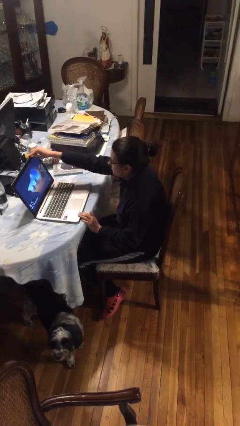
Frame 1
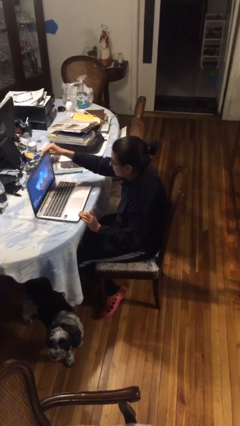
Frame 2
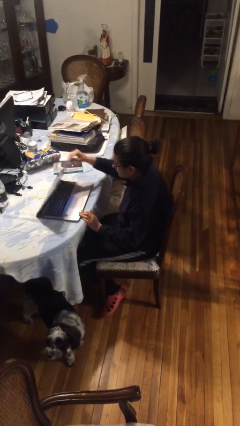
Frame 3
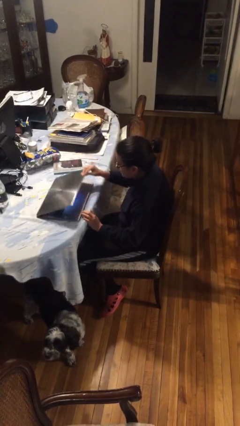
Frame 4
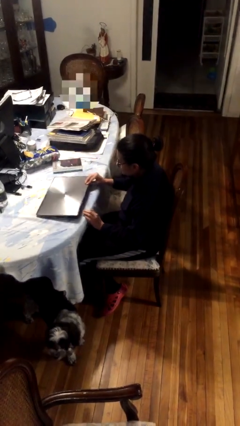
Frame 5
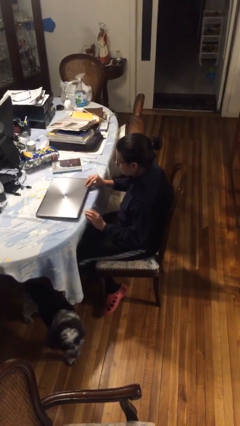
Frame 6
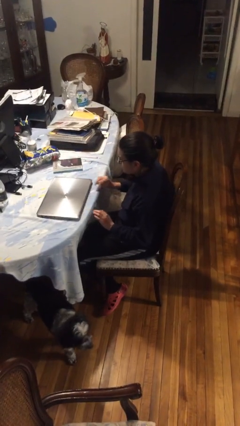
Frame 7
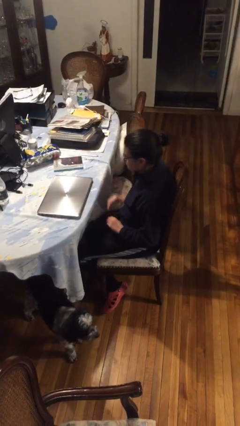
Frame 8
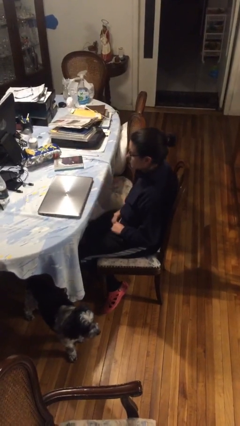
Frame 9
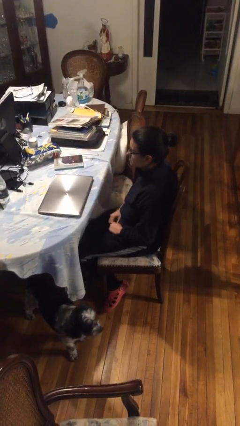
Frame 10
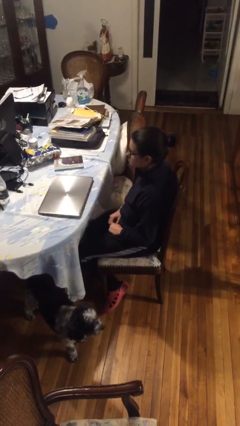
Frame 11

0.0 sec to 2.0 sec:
person closes laptop

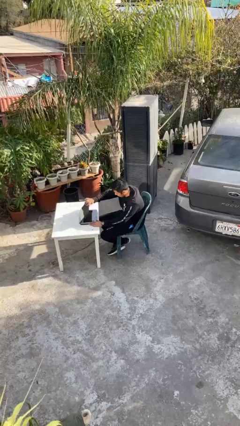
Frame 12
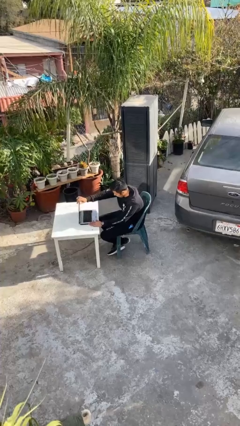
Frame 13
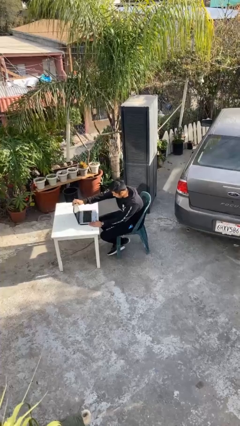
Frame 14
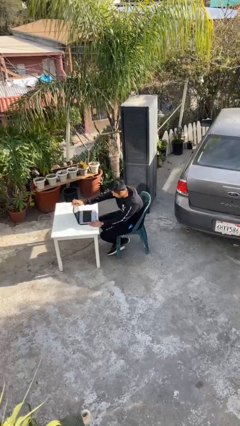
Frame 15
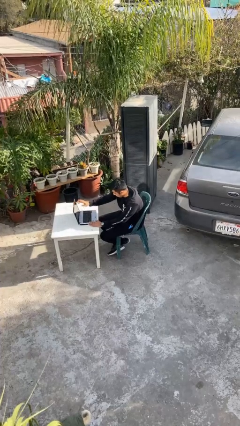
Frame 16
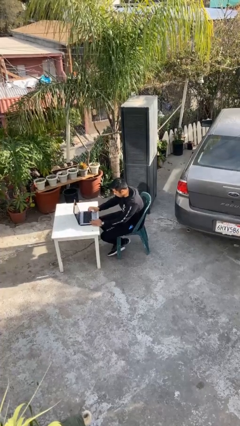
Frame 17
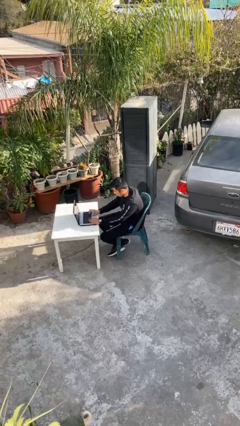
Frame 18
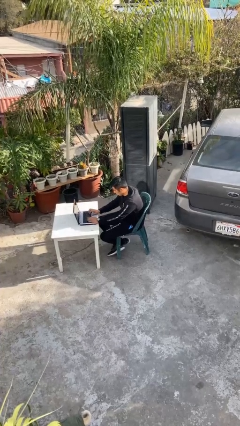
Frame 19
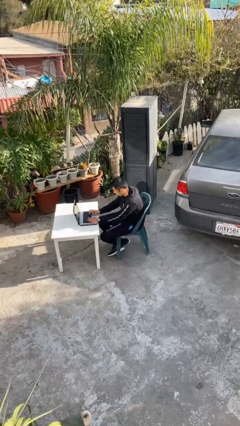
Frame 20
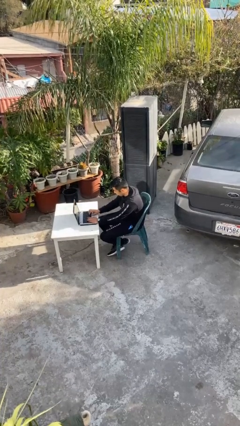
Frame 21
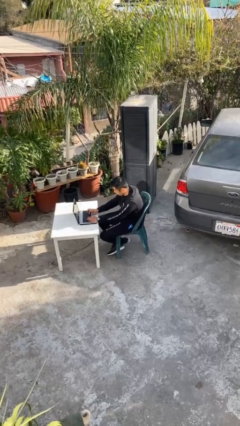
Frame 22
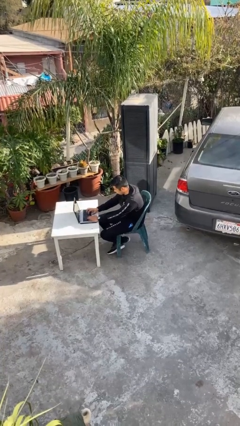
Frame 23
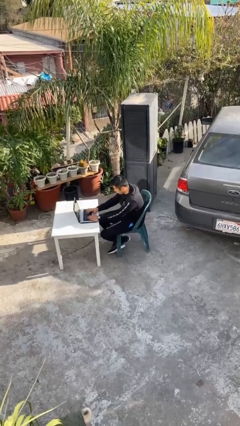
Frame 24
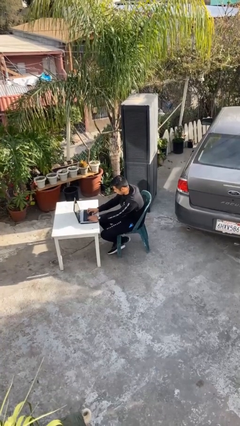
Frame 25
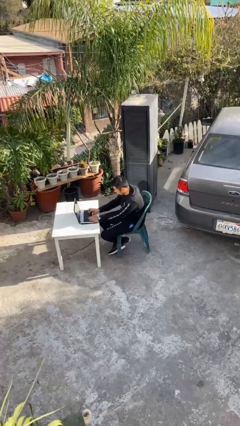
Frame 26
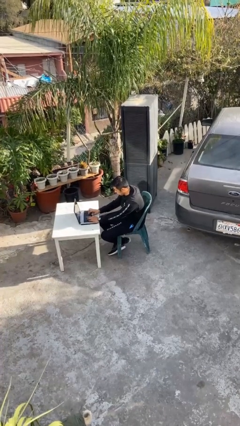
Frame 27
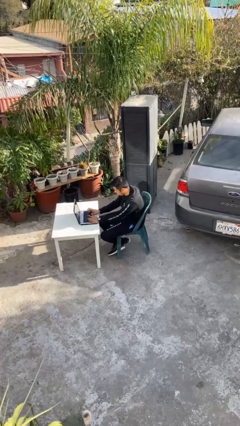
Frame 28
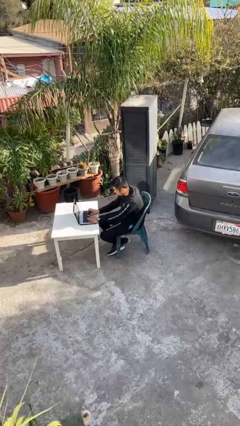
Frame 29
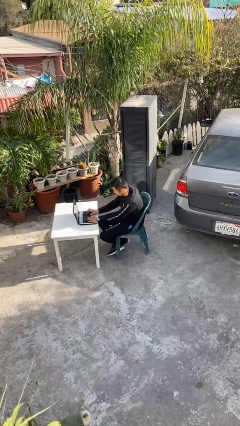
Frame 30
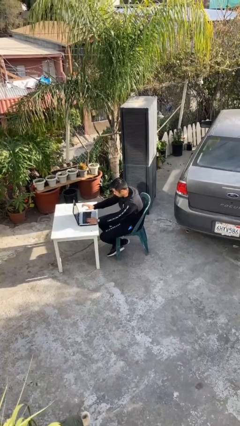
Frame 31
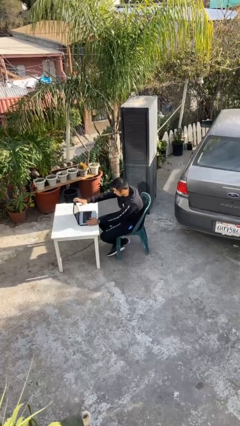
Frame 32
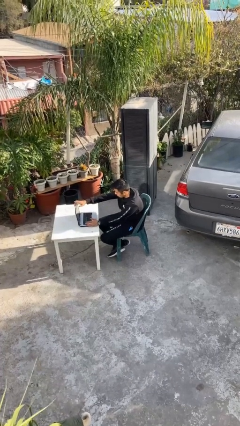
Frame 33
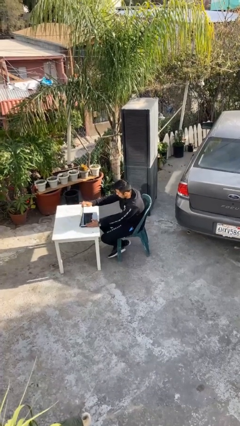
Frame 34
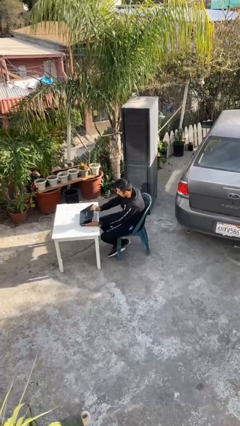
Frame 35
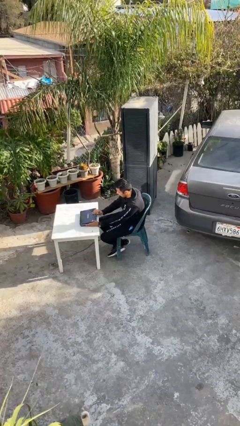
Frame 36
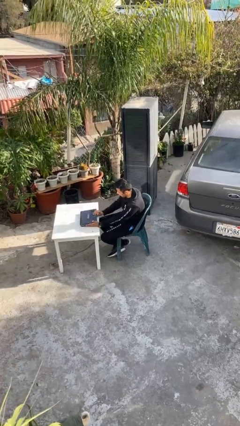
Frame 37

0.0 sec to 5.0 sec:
person interacts with laptop

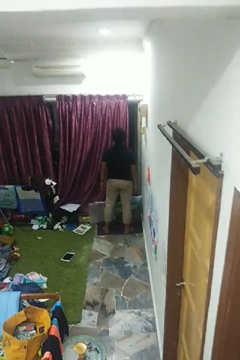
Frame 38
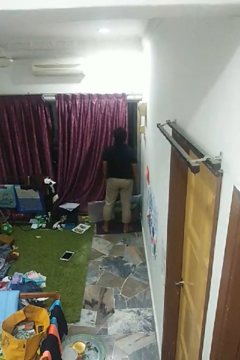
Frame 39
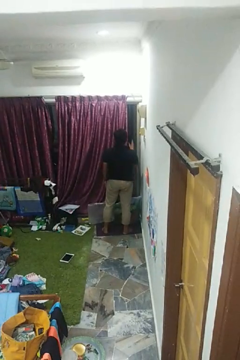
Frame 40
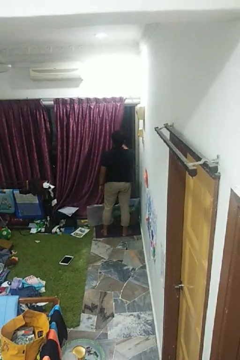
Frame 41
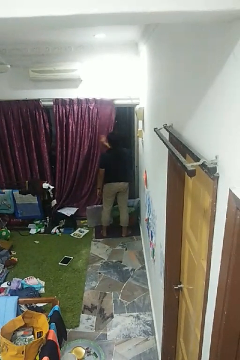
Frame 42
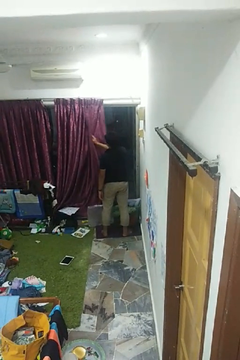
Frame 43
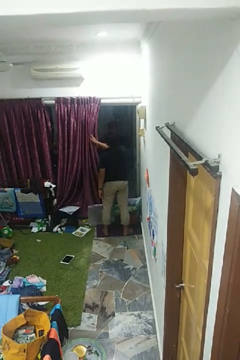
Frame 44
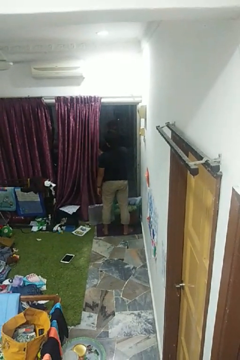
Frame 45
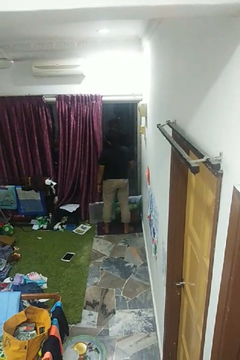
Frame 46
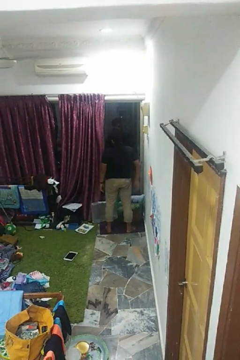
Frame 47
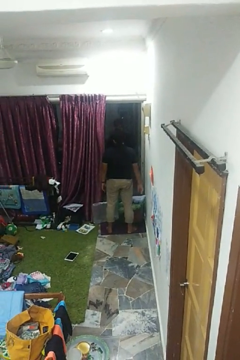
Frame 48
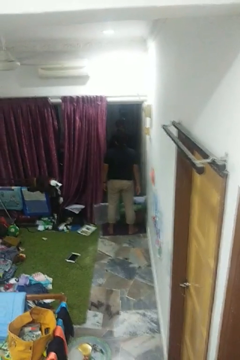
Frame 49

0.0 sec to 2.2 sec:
person opens curtains

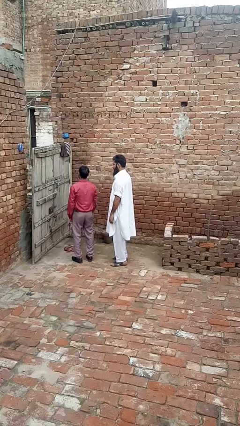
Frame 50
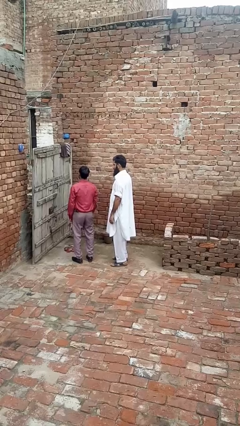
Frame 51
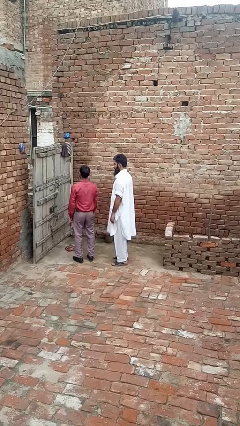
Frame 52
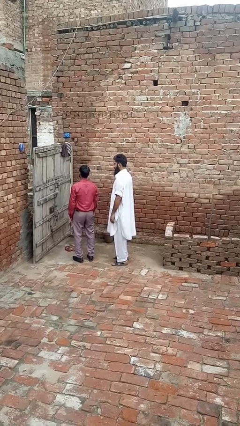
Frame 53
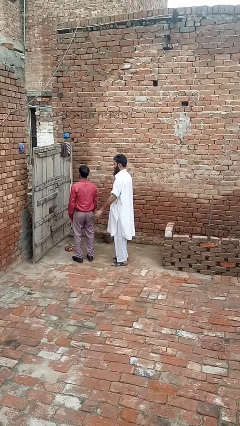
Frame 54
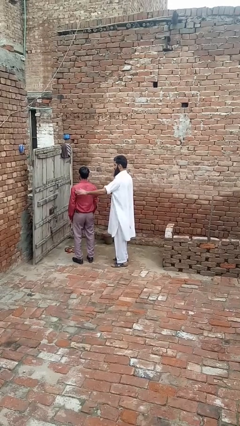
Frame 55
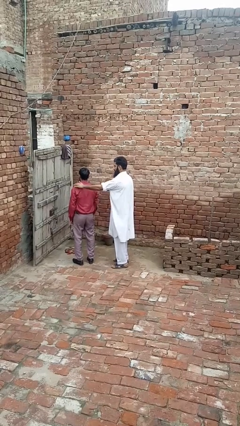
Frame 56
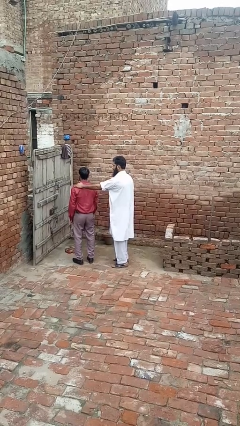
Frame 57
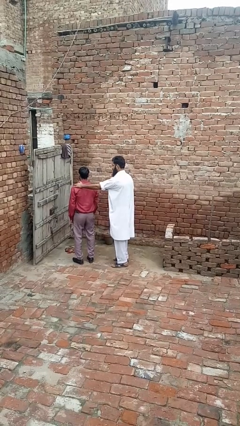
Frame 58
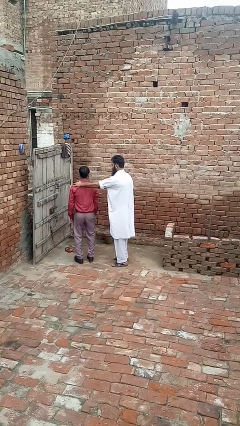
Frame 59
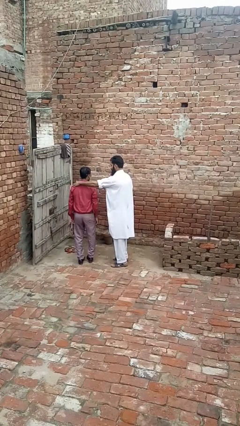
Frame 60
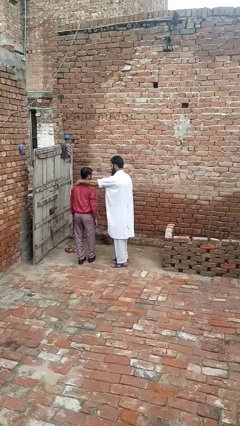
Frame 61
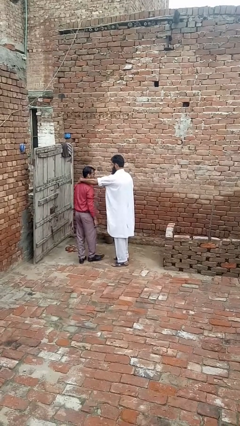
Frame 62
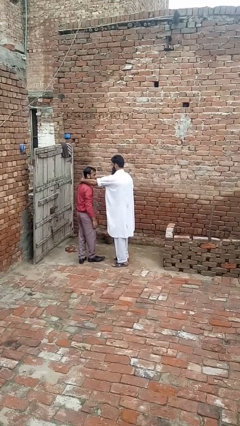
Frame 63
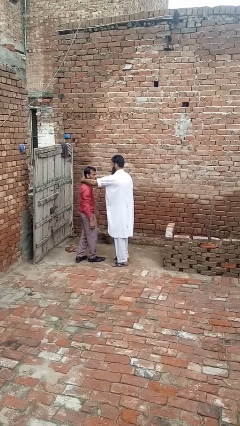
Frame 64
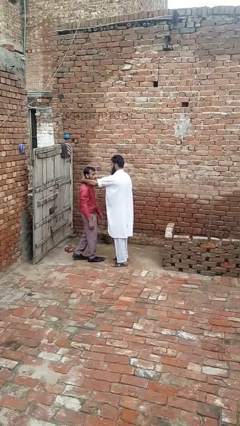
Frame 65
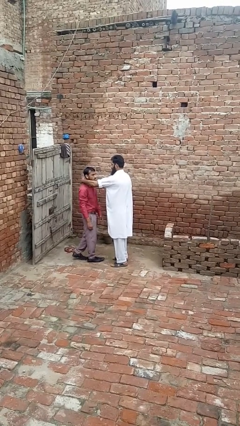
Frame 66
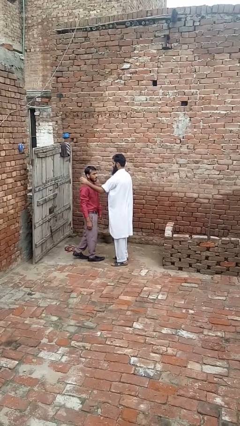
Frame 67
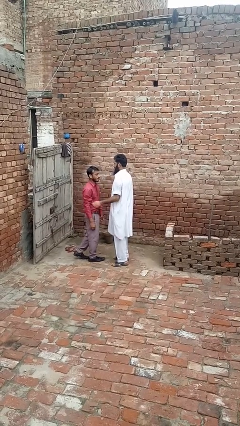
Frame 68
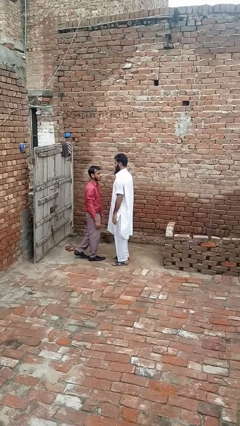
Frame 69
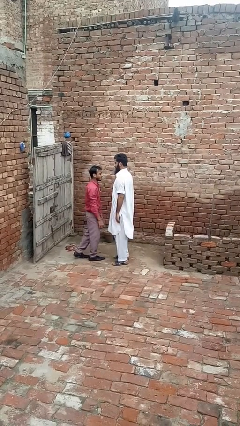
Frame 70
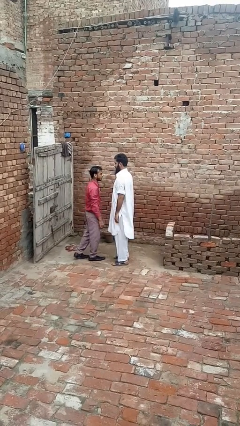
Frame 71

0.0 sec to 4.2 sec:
person touches back of person

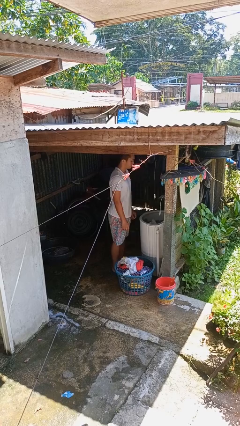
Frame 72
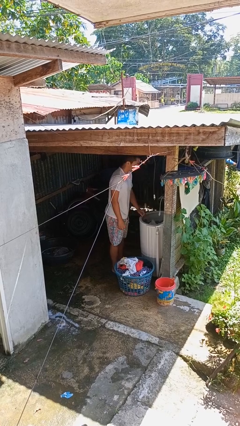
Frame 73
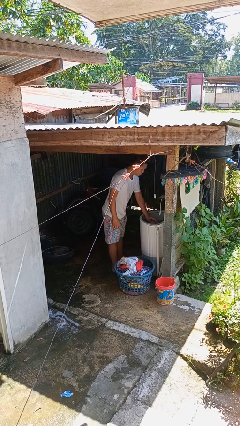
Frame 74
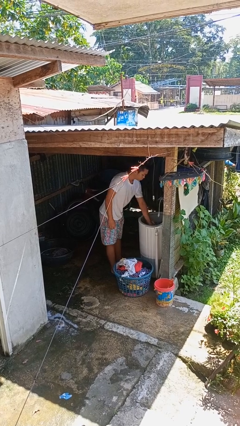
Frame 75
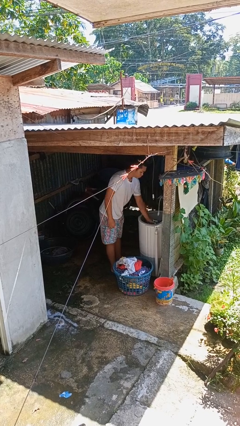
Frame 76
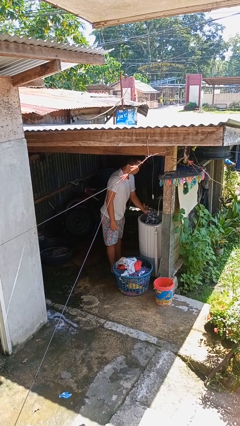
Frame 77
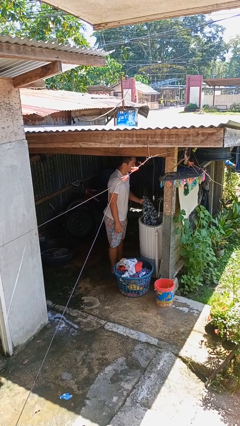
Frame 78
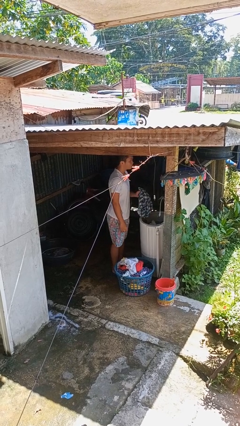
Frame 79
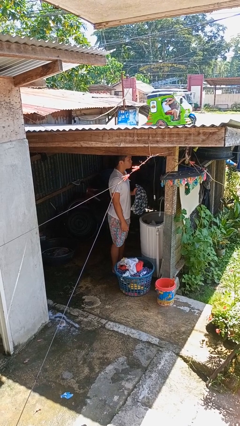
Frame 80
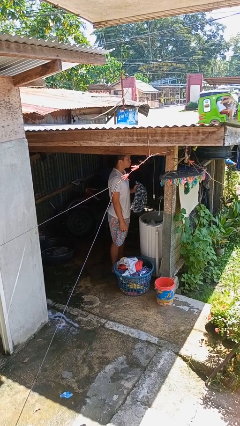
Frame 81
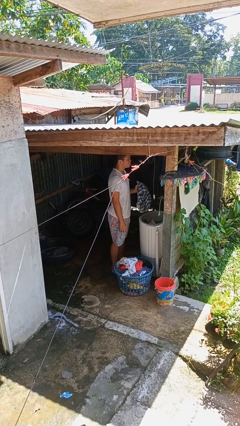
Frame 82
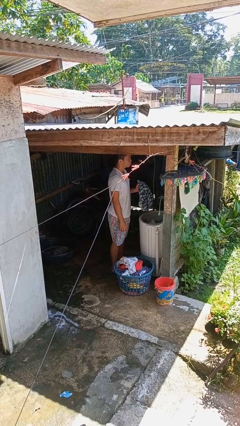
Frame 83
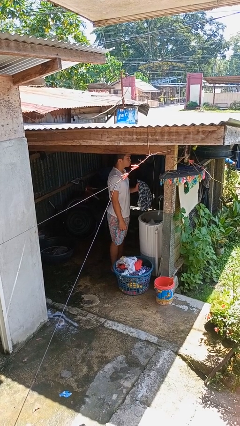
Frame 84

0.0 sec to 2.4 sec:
person unloads clotheswasher

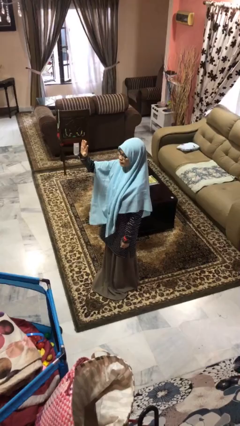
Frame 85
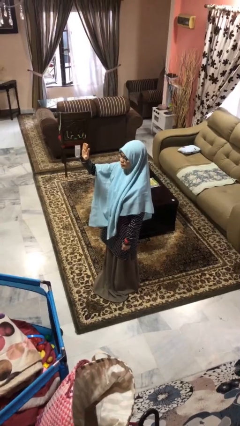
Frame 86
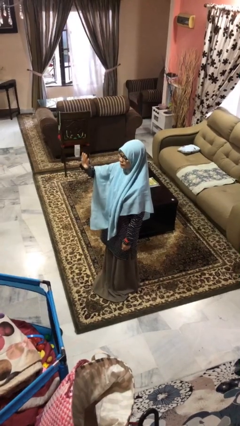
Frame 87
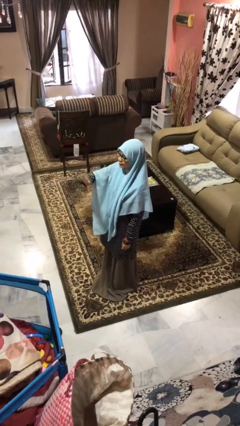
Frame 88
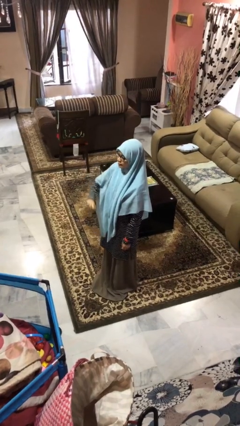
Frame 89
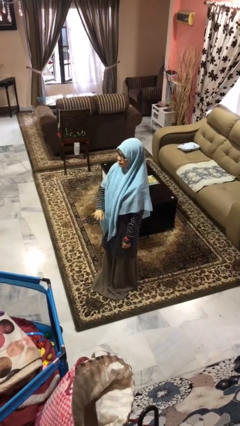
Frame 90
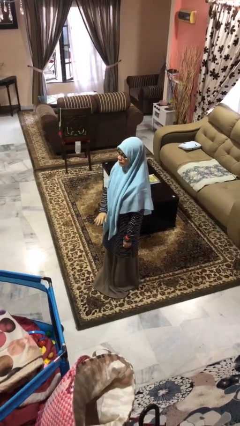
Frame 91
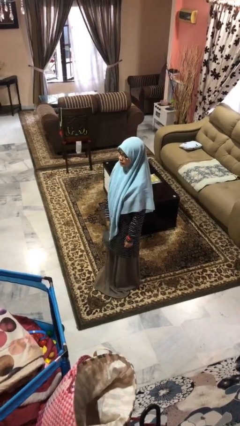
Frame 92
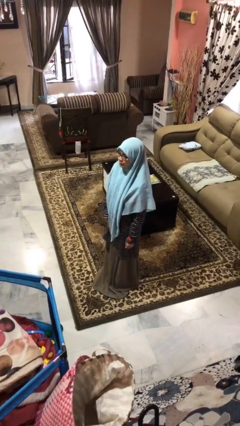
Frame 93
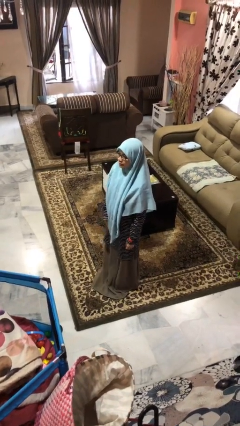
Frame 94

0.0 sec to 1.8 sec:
person gestures swipe down

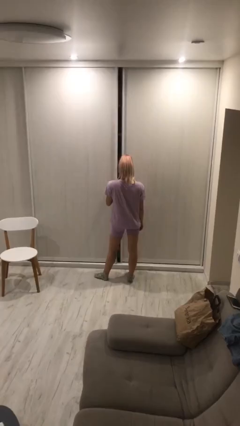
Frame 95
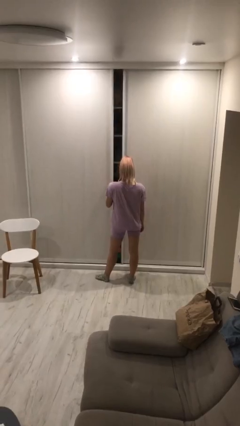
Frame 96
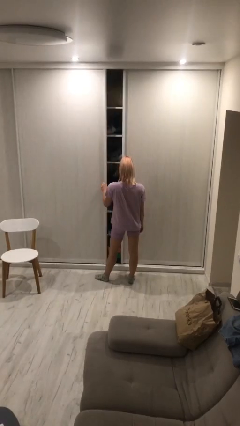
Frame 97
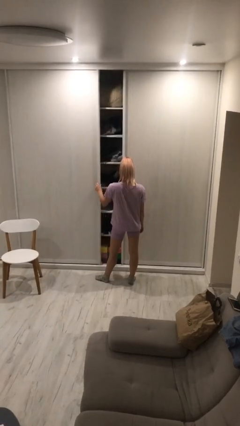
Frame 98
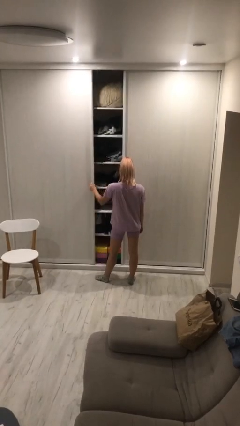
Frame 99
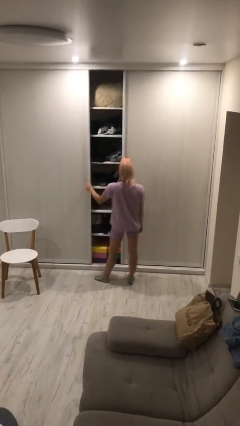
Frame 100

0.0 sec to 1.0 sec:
person opens sliding door
